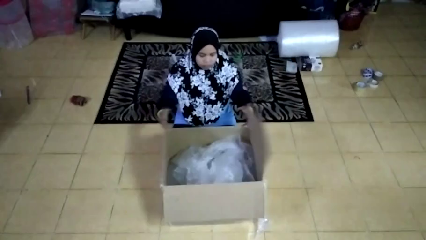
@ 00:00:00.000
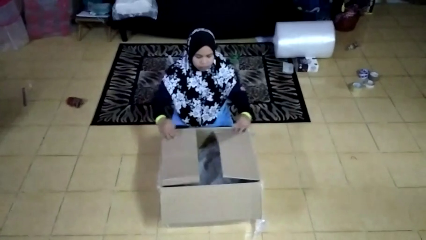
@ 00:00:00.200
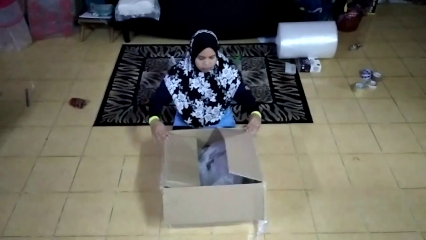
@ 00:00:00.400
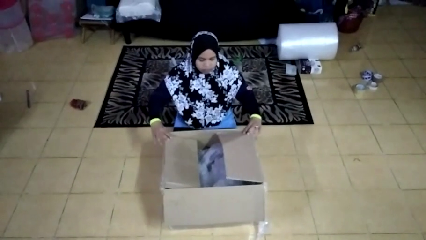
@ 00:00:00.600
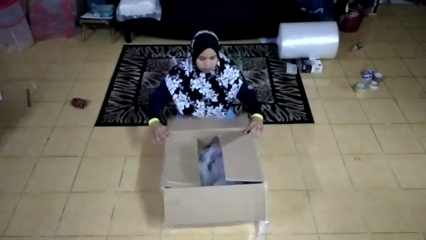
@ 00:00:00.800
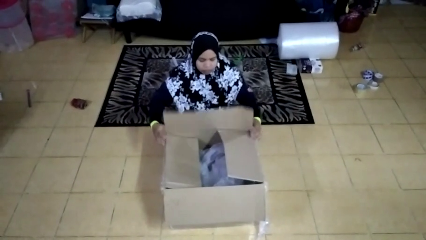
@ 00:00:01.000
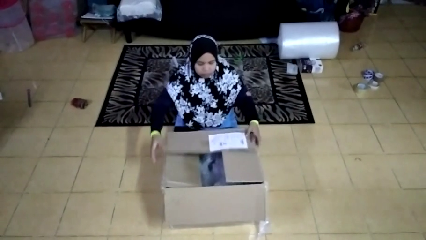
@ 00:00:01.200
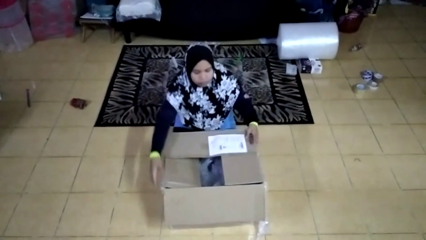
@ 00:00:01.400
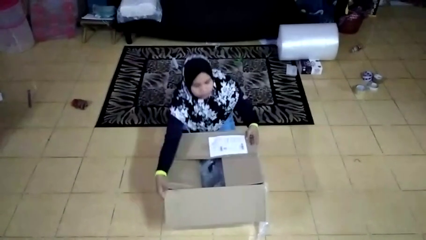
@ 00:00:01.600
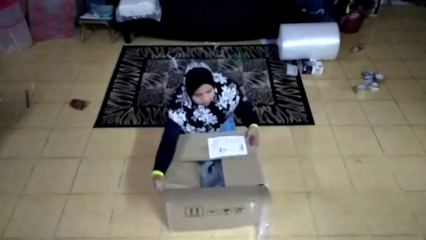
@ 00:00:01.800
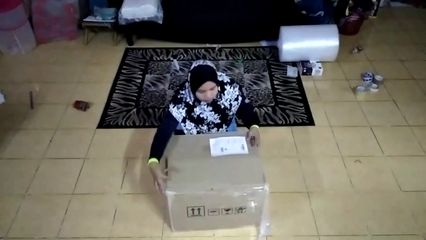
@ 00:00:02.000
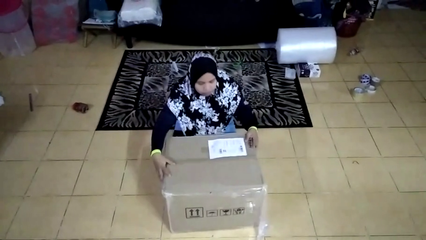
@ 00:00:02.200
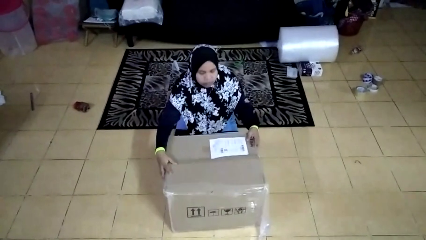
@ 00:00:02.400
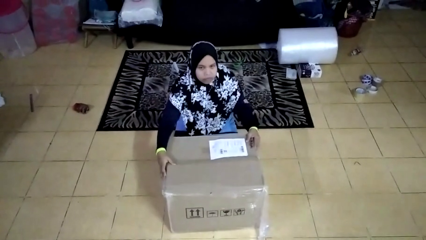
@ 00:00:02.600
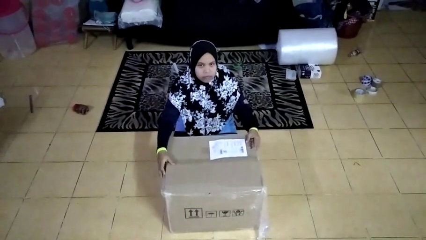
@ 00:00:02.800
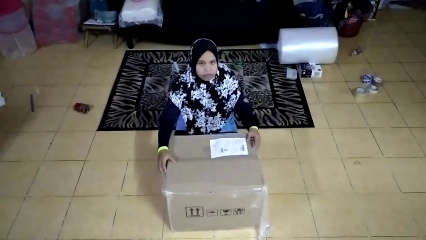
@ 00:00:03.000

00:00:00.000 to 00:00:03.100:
person closes box

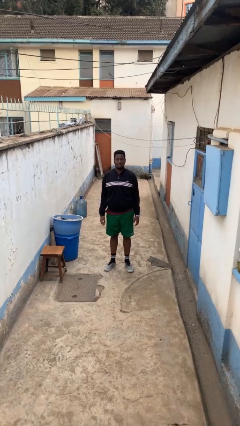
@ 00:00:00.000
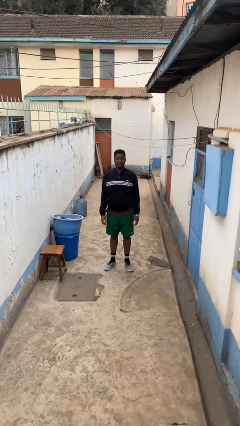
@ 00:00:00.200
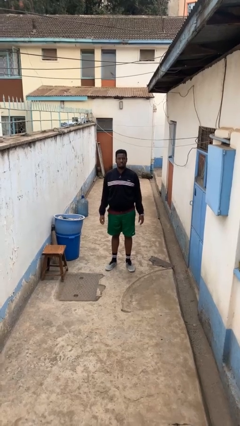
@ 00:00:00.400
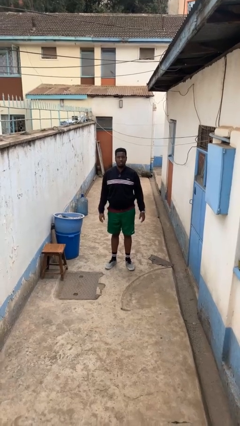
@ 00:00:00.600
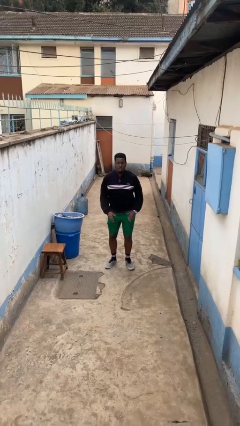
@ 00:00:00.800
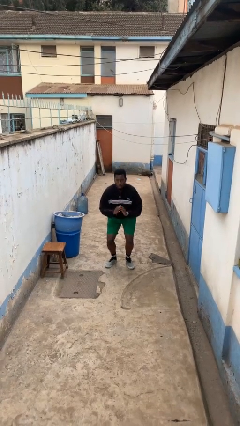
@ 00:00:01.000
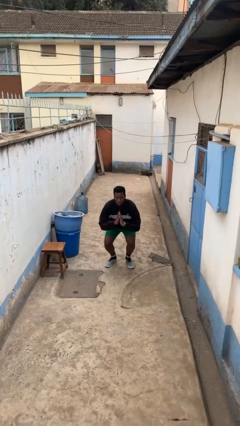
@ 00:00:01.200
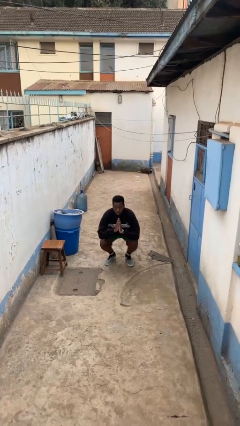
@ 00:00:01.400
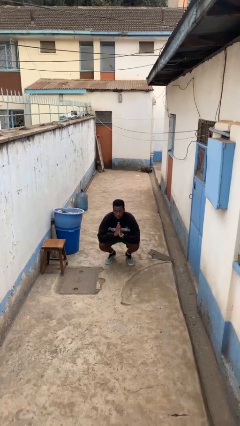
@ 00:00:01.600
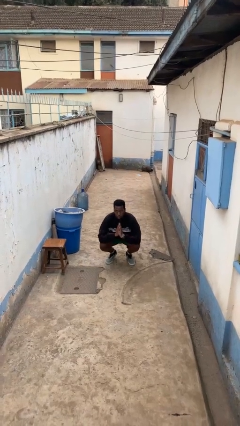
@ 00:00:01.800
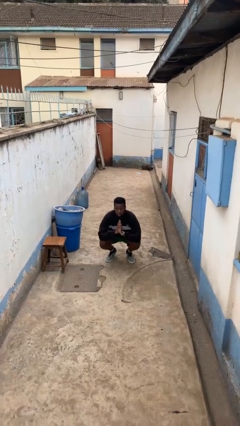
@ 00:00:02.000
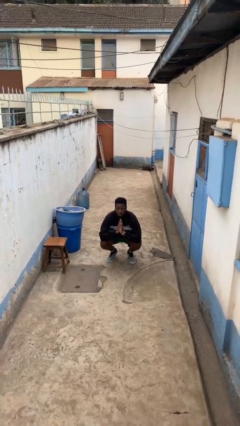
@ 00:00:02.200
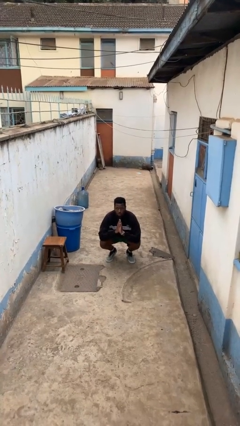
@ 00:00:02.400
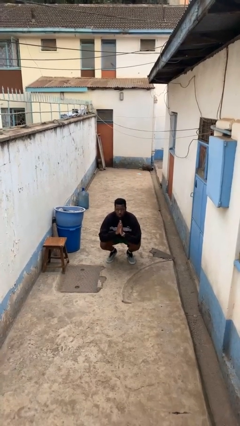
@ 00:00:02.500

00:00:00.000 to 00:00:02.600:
person squats

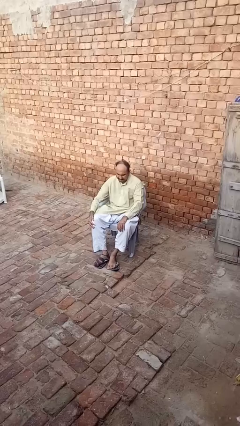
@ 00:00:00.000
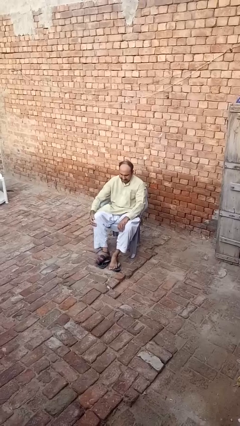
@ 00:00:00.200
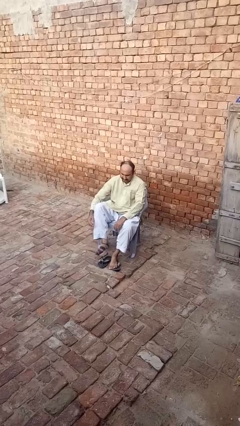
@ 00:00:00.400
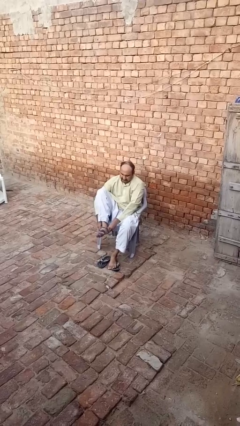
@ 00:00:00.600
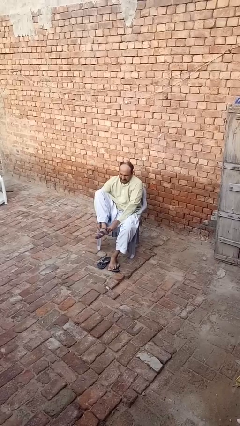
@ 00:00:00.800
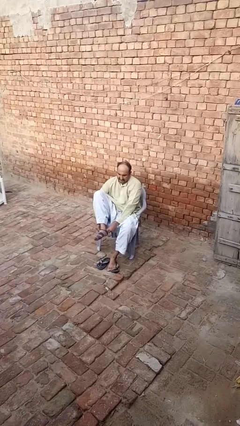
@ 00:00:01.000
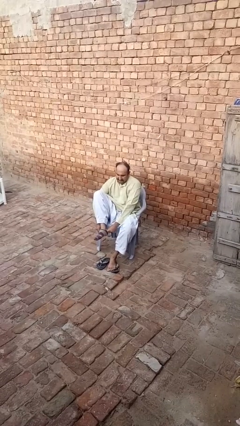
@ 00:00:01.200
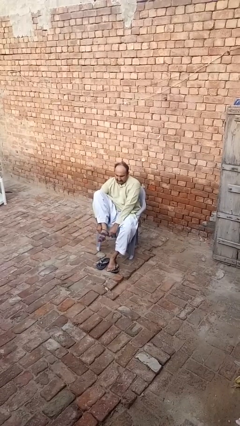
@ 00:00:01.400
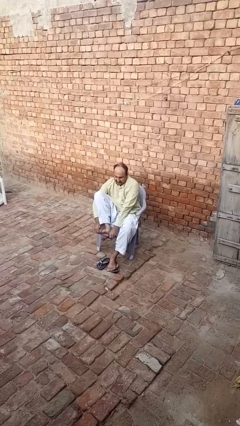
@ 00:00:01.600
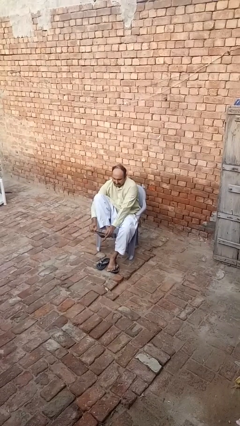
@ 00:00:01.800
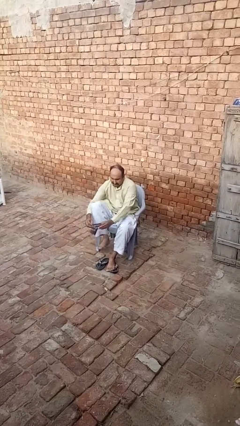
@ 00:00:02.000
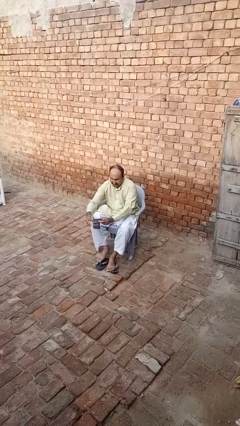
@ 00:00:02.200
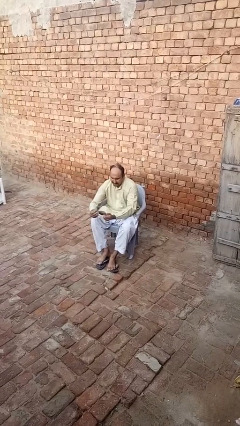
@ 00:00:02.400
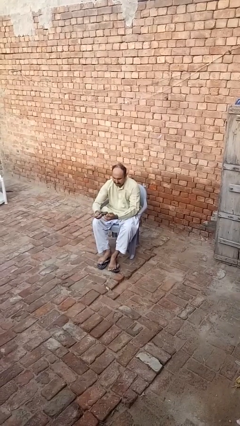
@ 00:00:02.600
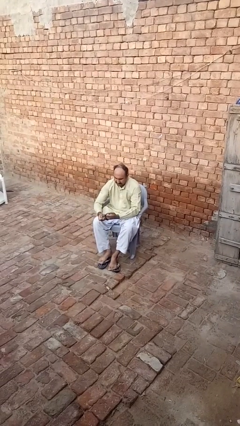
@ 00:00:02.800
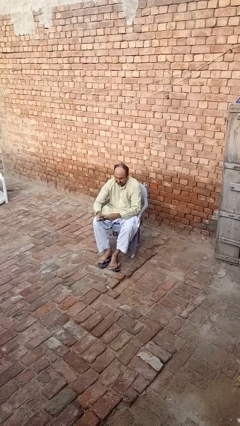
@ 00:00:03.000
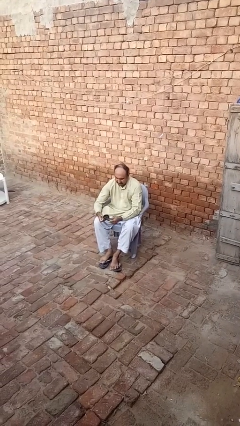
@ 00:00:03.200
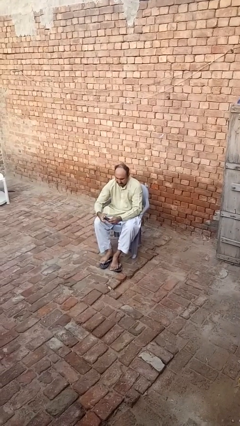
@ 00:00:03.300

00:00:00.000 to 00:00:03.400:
person takes off socks

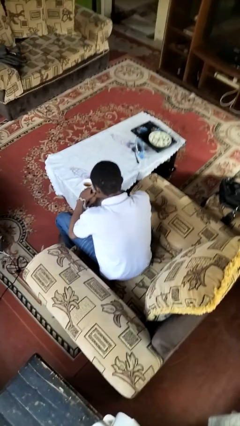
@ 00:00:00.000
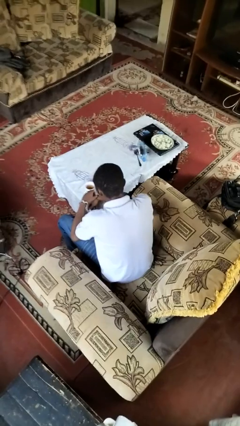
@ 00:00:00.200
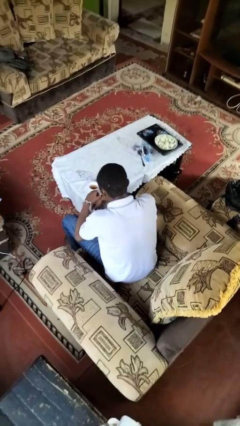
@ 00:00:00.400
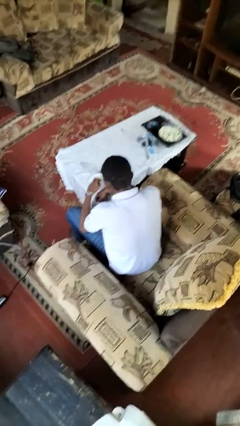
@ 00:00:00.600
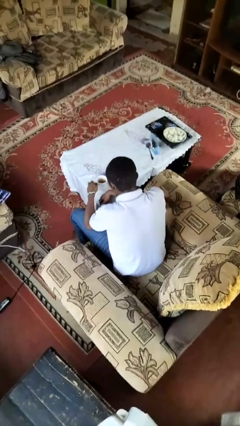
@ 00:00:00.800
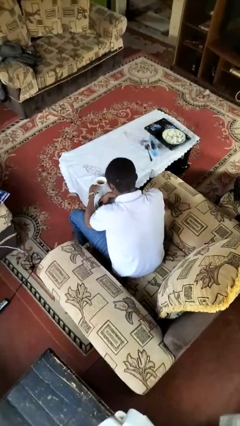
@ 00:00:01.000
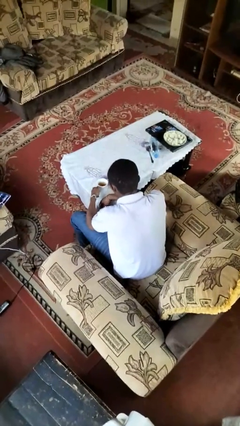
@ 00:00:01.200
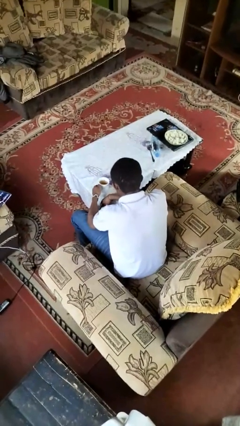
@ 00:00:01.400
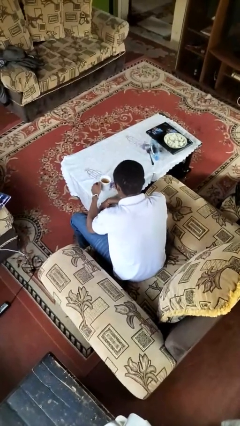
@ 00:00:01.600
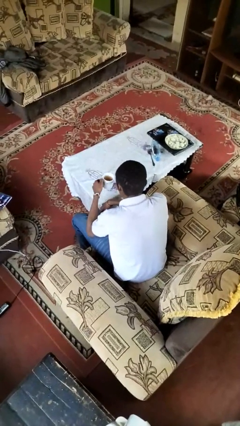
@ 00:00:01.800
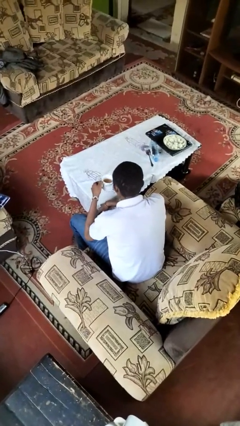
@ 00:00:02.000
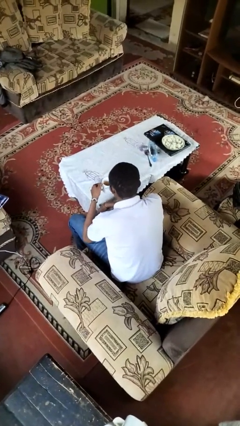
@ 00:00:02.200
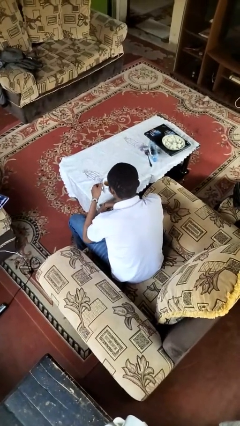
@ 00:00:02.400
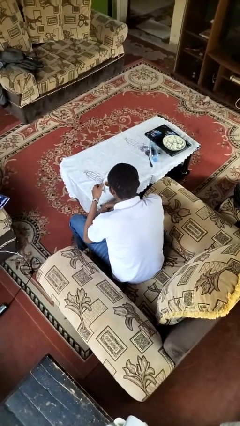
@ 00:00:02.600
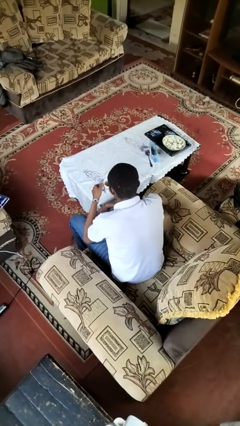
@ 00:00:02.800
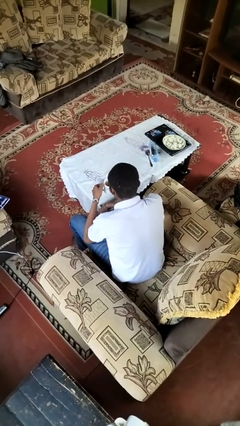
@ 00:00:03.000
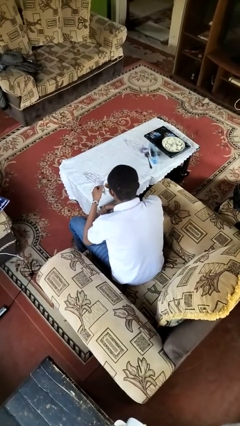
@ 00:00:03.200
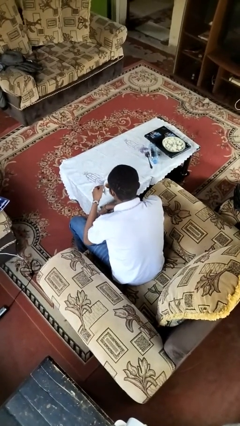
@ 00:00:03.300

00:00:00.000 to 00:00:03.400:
person picks up object from table

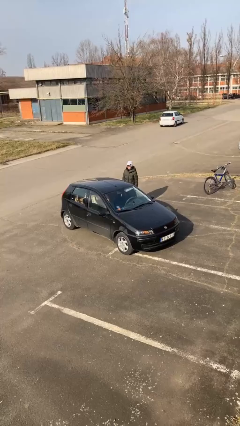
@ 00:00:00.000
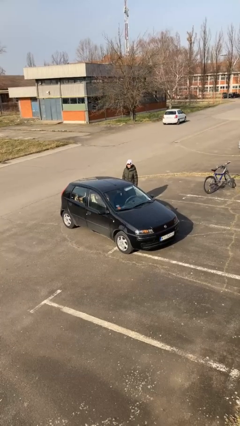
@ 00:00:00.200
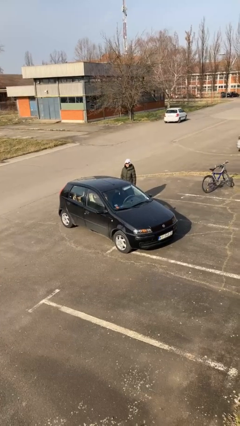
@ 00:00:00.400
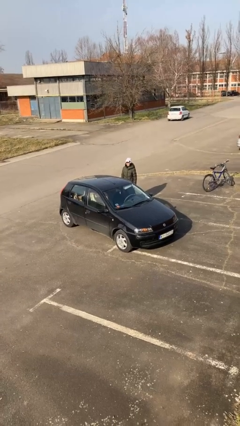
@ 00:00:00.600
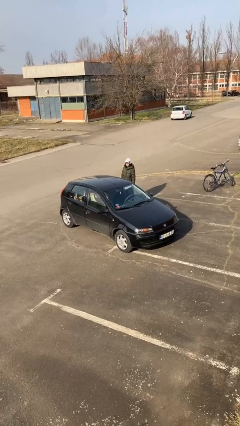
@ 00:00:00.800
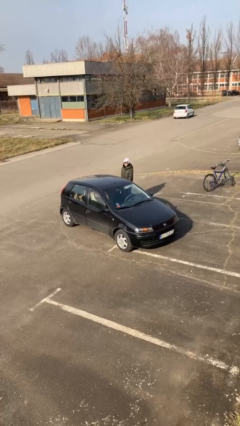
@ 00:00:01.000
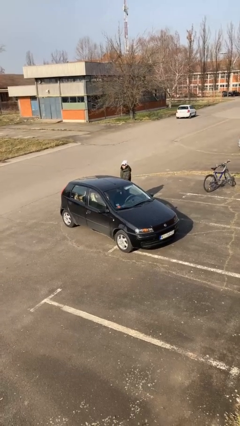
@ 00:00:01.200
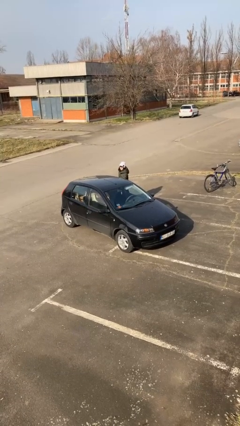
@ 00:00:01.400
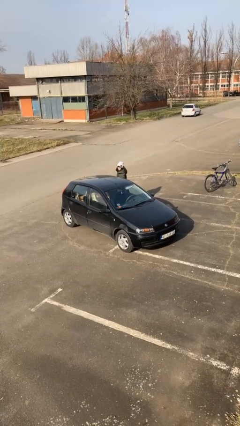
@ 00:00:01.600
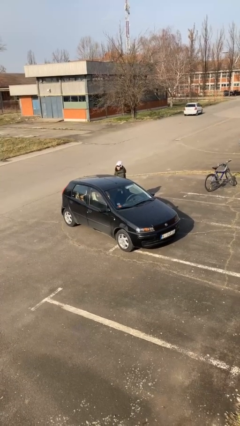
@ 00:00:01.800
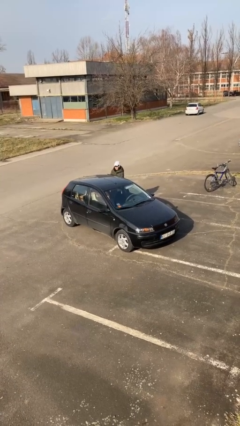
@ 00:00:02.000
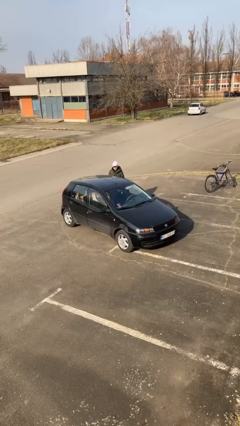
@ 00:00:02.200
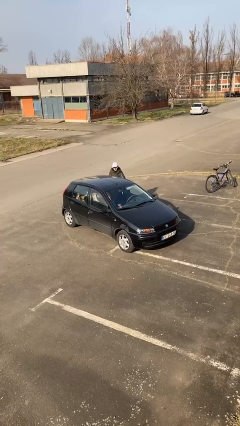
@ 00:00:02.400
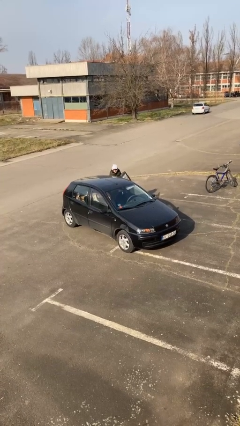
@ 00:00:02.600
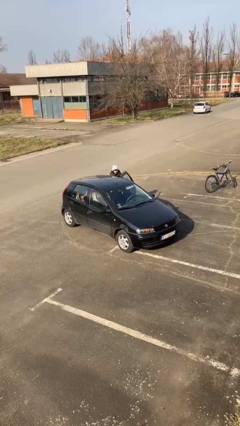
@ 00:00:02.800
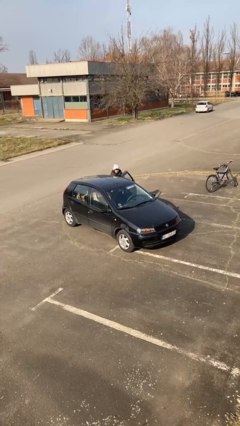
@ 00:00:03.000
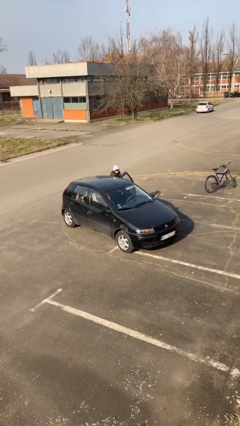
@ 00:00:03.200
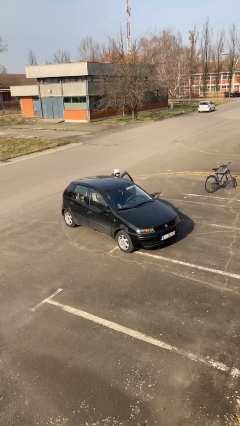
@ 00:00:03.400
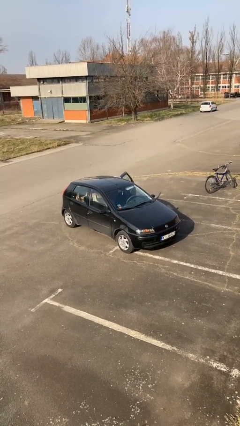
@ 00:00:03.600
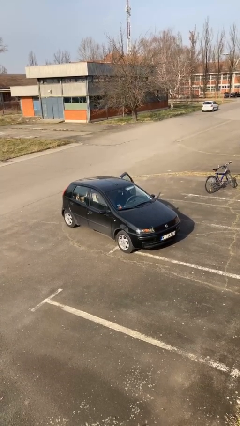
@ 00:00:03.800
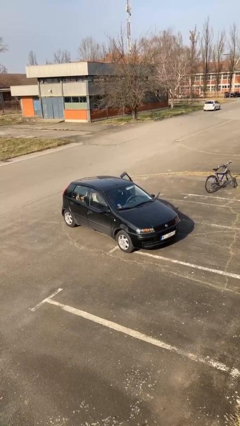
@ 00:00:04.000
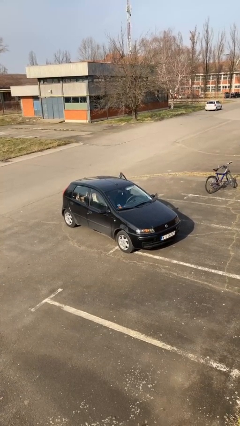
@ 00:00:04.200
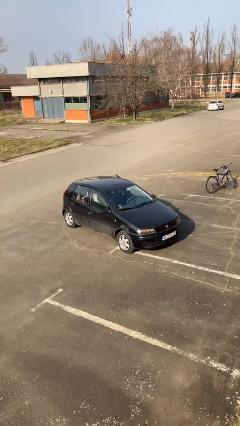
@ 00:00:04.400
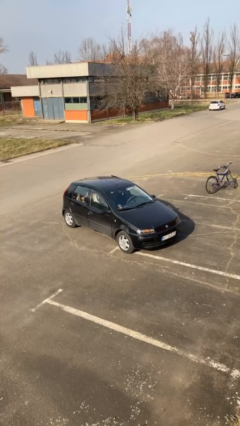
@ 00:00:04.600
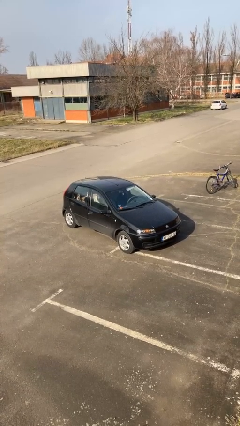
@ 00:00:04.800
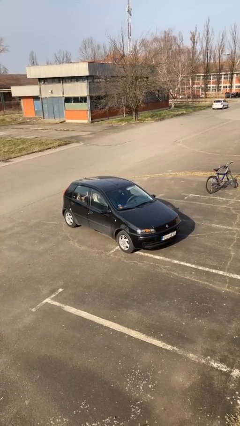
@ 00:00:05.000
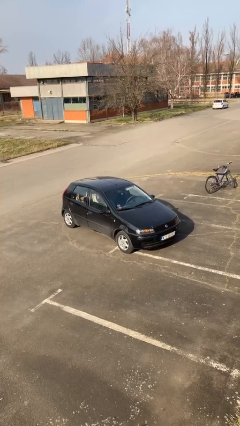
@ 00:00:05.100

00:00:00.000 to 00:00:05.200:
car picks up person
